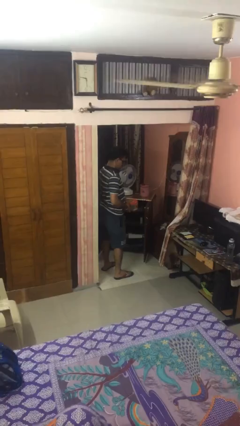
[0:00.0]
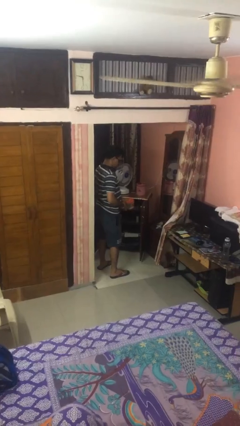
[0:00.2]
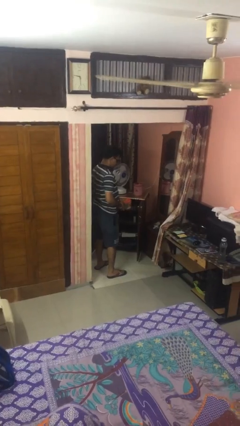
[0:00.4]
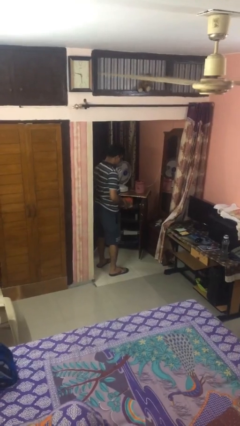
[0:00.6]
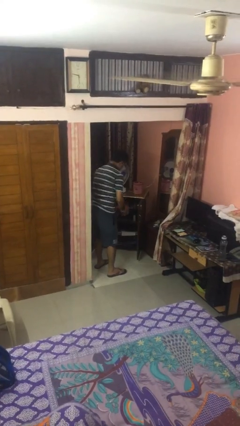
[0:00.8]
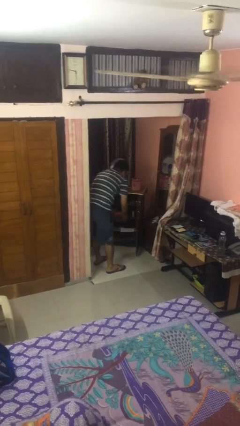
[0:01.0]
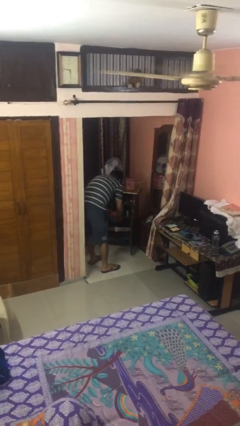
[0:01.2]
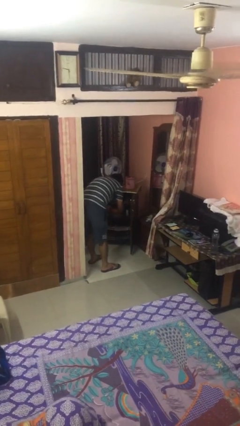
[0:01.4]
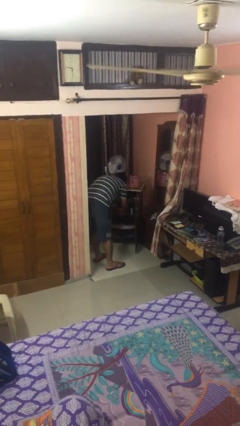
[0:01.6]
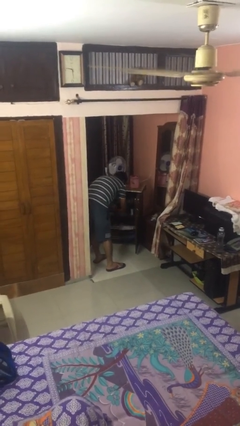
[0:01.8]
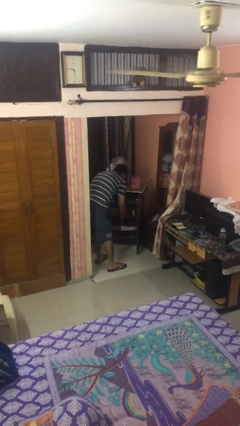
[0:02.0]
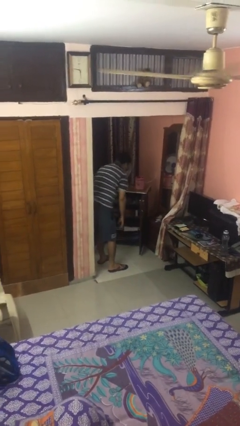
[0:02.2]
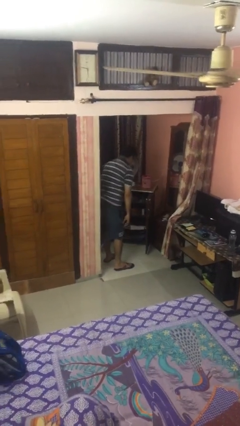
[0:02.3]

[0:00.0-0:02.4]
person puts down object into cabinet

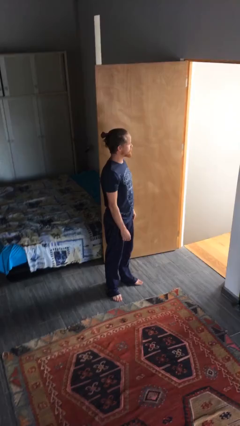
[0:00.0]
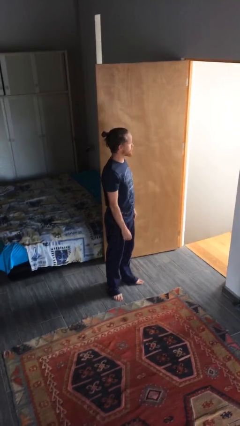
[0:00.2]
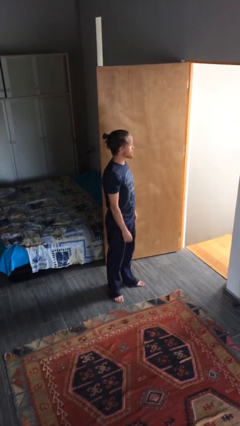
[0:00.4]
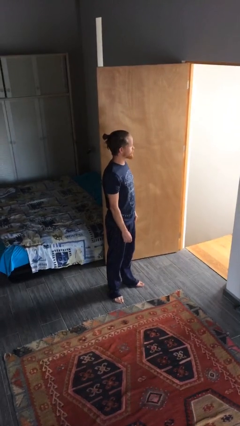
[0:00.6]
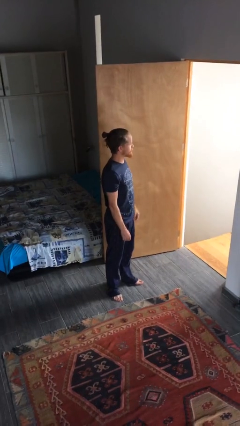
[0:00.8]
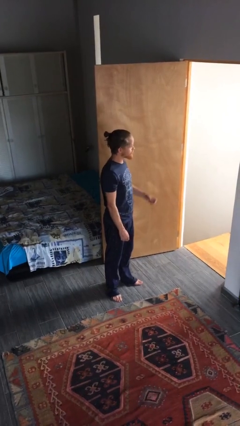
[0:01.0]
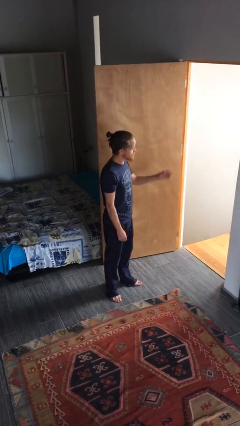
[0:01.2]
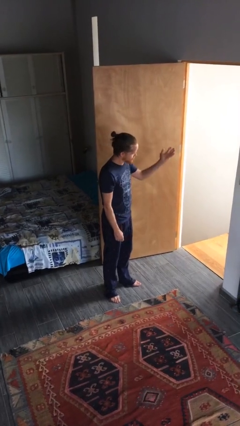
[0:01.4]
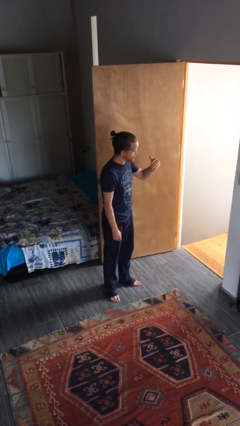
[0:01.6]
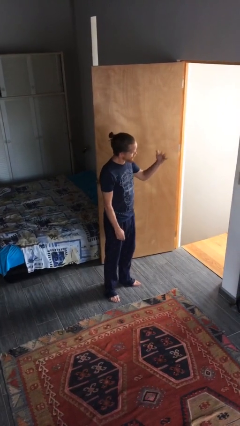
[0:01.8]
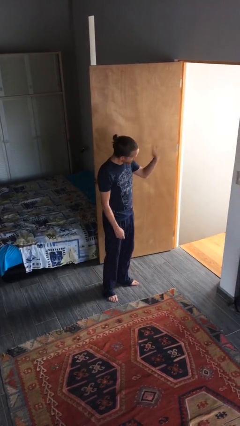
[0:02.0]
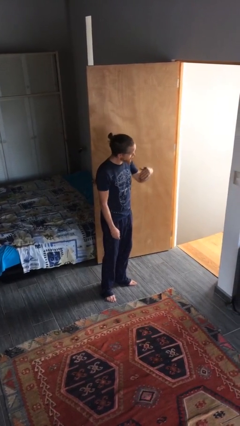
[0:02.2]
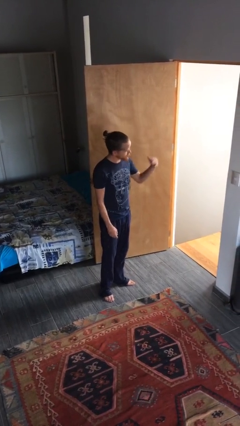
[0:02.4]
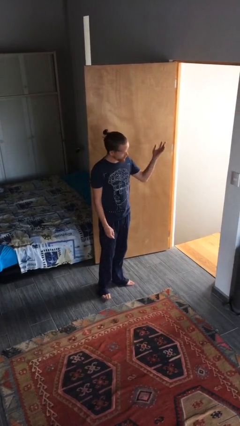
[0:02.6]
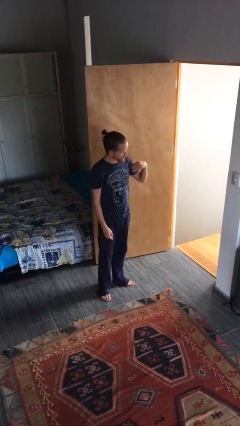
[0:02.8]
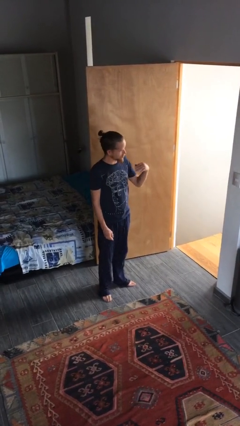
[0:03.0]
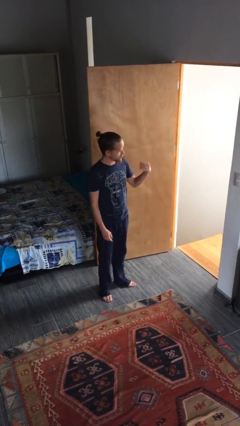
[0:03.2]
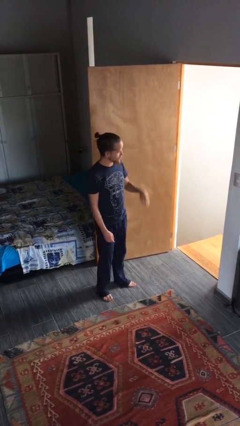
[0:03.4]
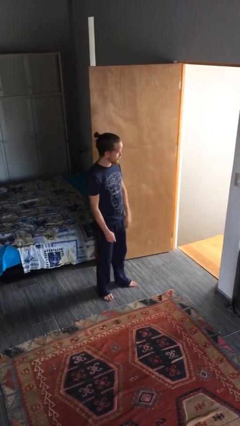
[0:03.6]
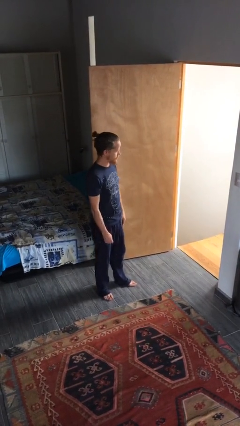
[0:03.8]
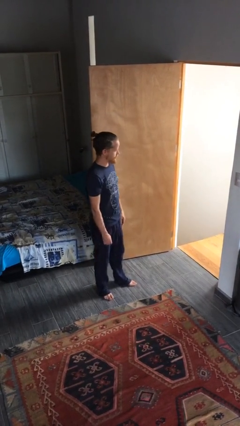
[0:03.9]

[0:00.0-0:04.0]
person gestures come here

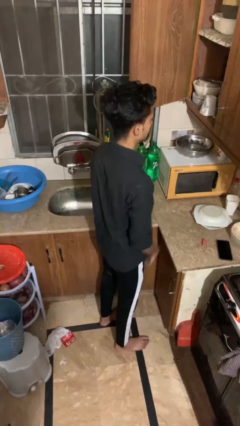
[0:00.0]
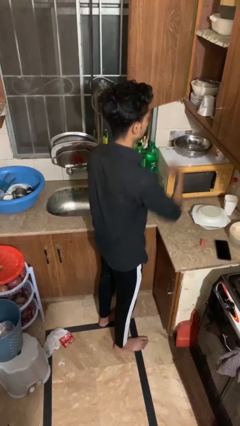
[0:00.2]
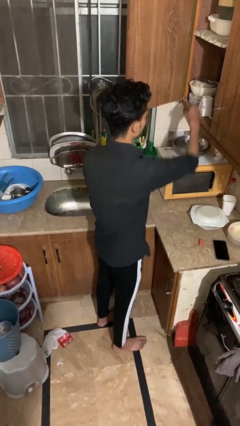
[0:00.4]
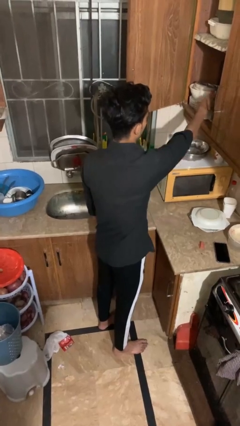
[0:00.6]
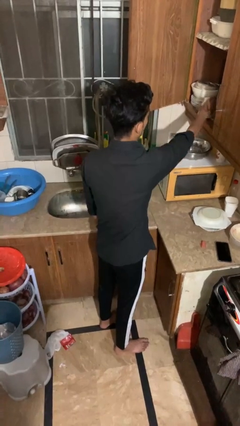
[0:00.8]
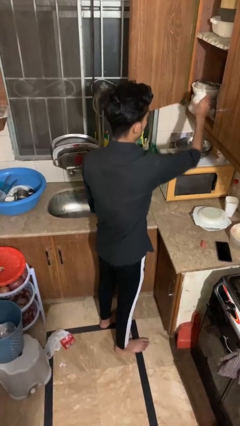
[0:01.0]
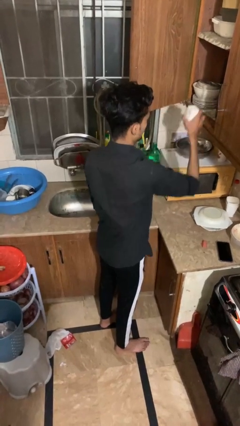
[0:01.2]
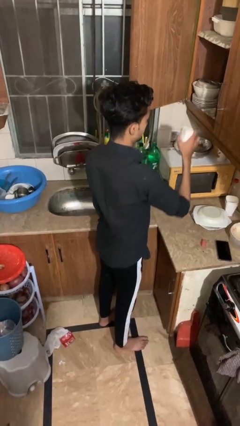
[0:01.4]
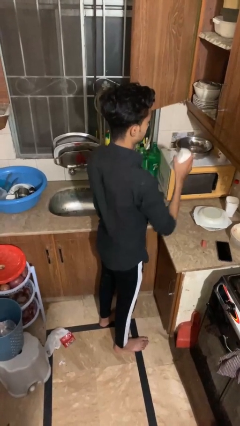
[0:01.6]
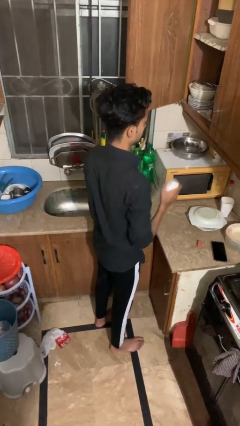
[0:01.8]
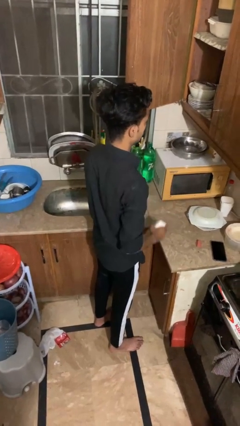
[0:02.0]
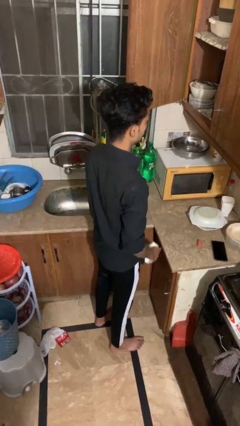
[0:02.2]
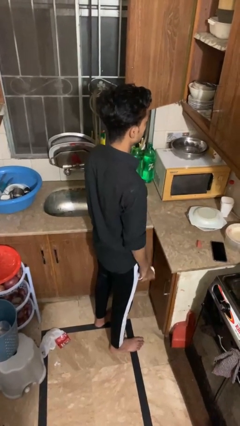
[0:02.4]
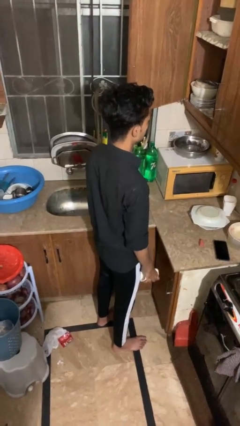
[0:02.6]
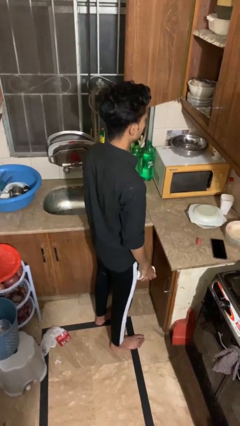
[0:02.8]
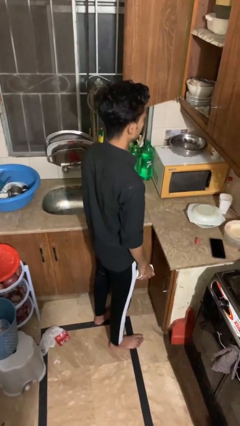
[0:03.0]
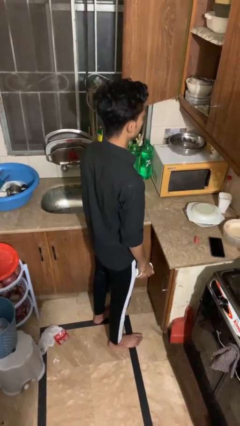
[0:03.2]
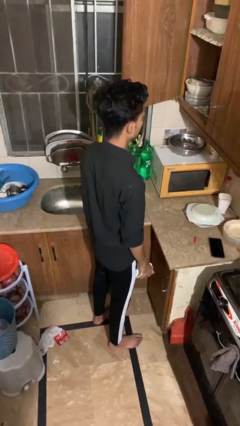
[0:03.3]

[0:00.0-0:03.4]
person picks up object from cabinet

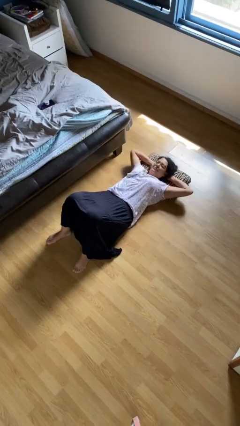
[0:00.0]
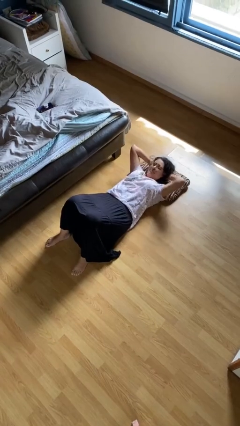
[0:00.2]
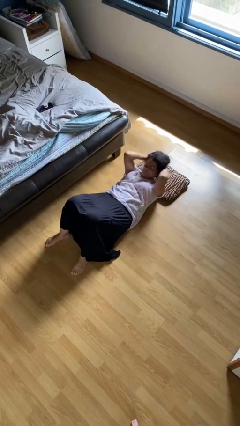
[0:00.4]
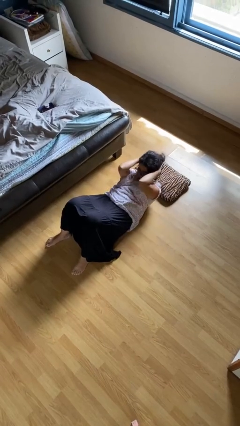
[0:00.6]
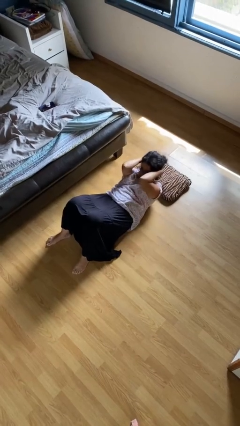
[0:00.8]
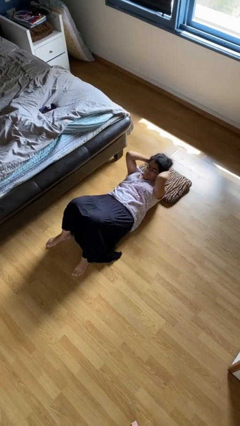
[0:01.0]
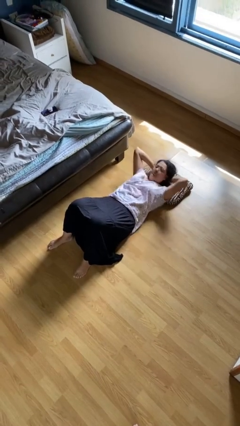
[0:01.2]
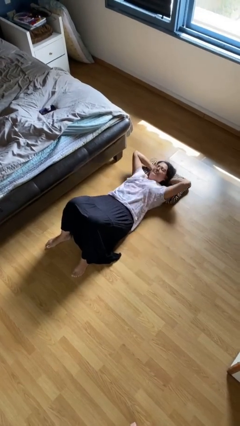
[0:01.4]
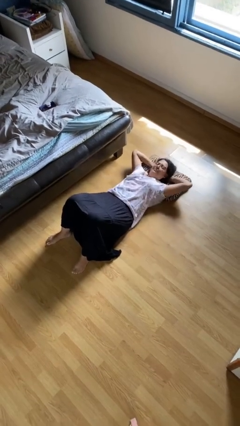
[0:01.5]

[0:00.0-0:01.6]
person exercises with situp

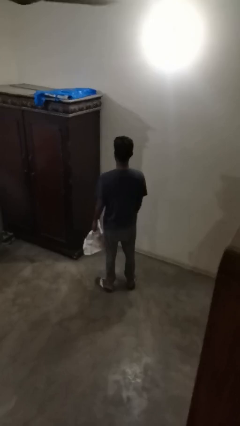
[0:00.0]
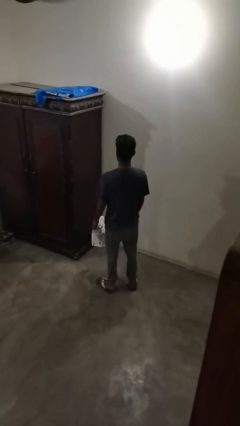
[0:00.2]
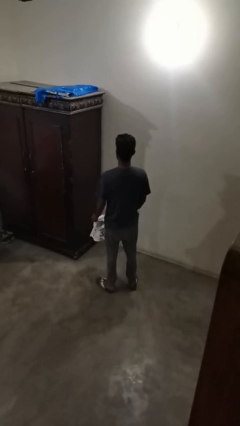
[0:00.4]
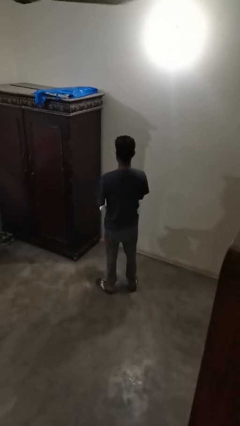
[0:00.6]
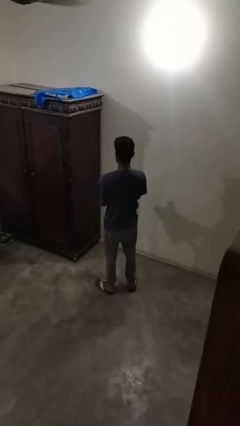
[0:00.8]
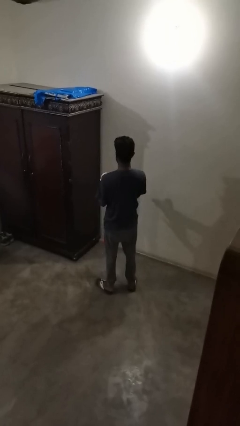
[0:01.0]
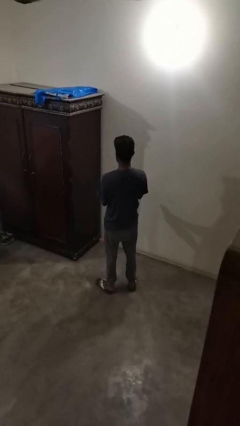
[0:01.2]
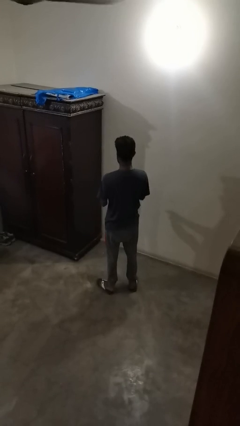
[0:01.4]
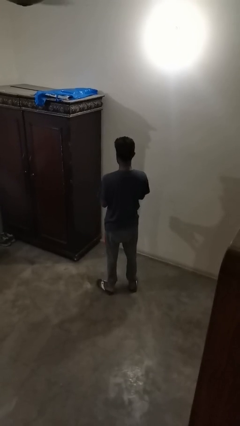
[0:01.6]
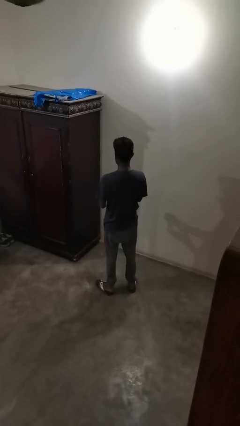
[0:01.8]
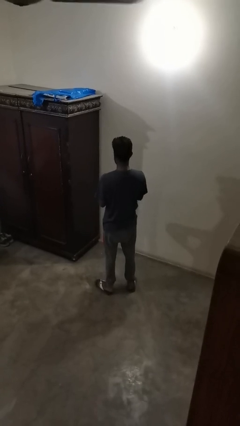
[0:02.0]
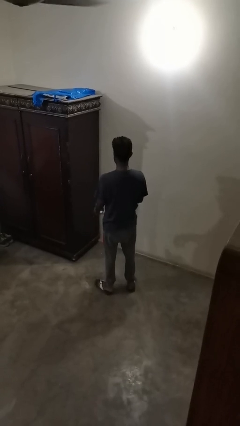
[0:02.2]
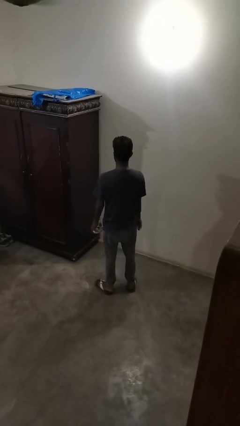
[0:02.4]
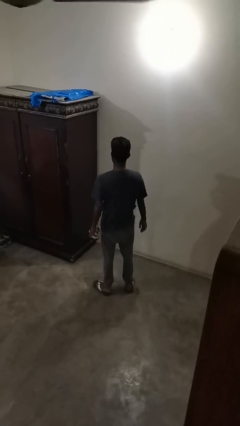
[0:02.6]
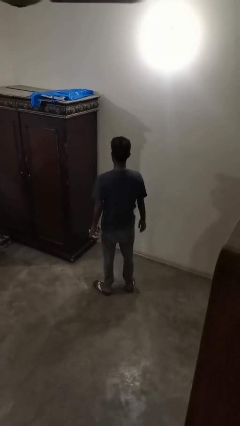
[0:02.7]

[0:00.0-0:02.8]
person crumples paper

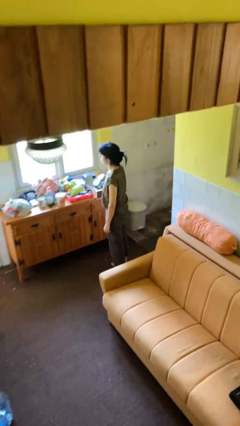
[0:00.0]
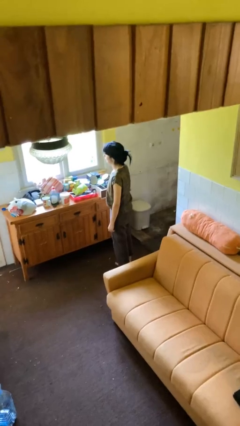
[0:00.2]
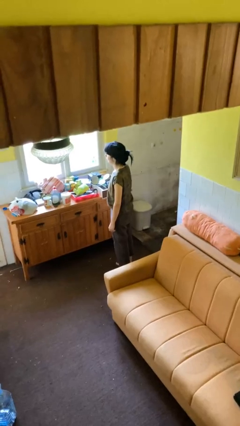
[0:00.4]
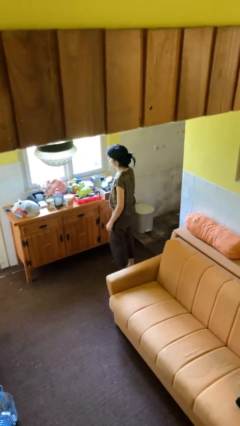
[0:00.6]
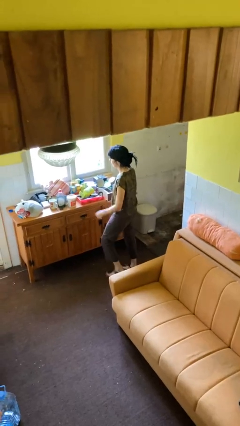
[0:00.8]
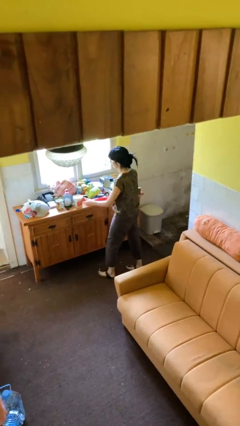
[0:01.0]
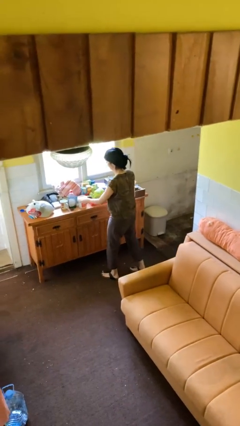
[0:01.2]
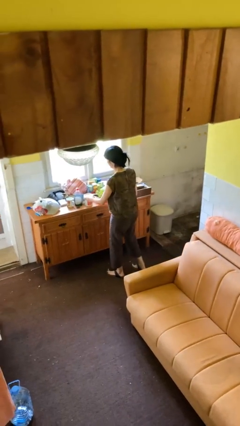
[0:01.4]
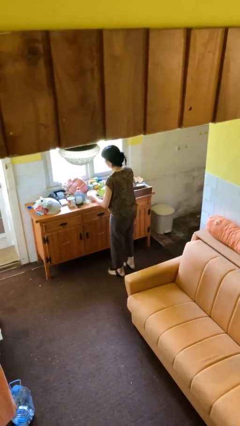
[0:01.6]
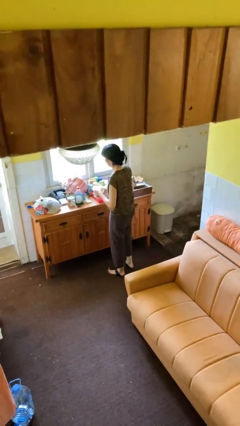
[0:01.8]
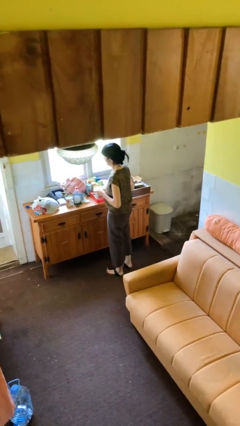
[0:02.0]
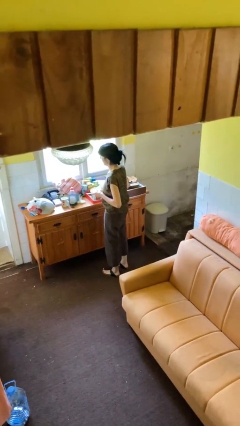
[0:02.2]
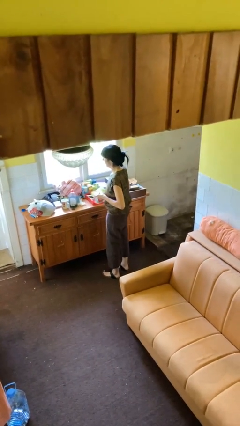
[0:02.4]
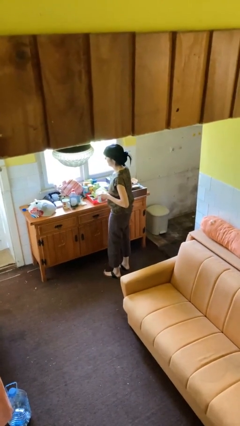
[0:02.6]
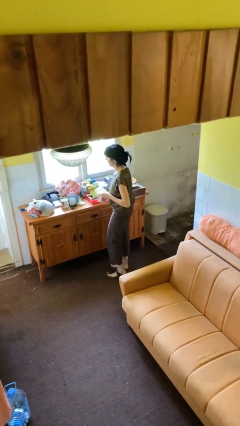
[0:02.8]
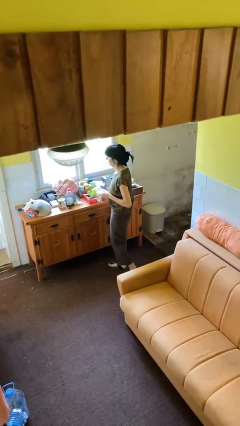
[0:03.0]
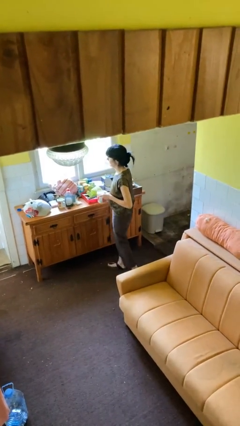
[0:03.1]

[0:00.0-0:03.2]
person picks up object from countertop
